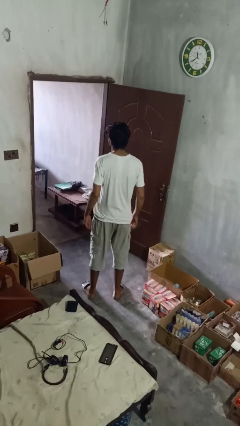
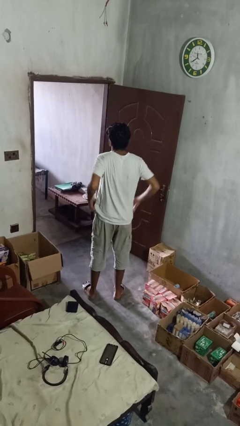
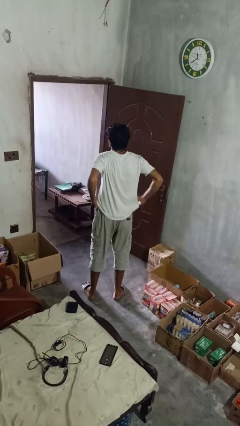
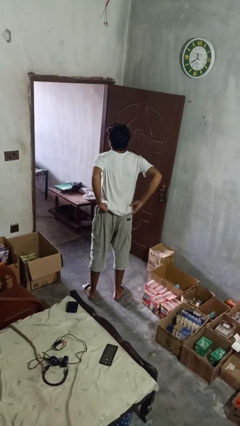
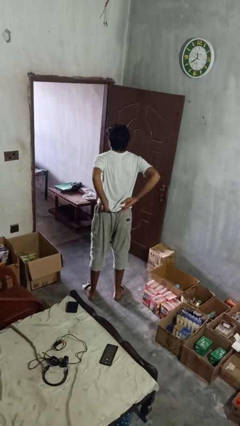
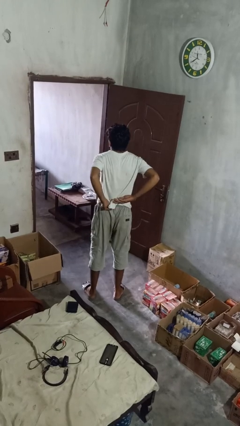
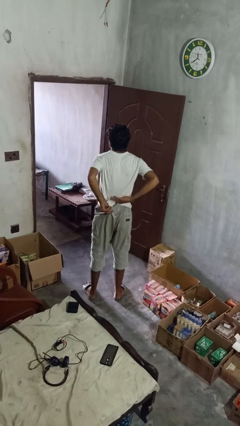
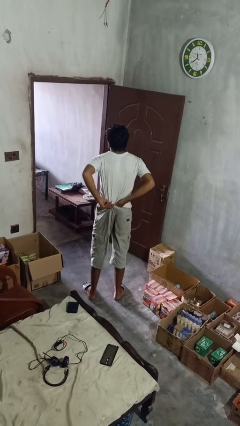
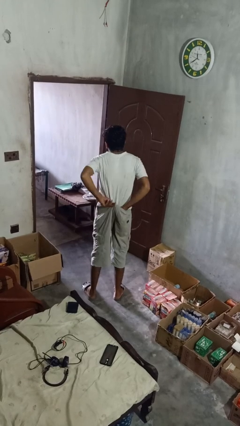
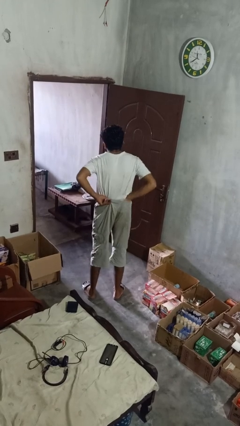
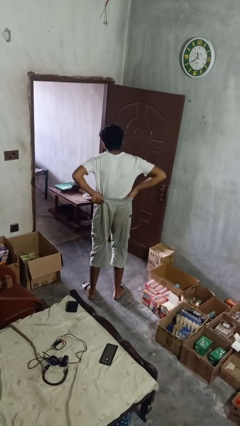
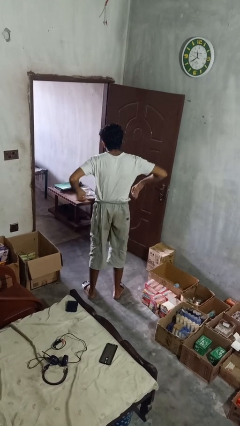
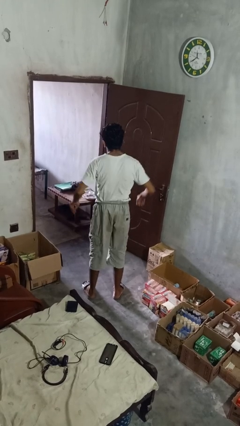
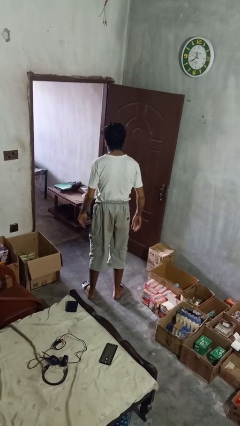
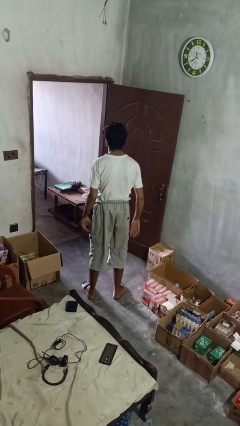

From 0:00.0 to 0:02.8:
person tucks in shirt

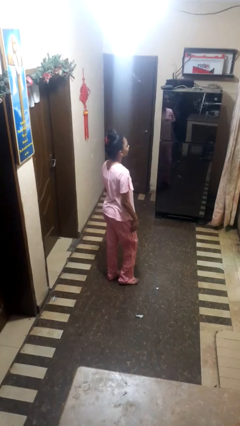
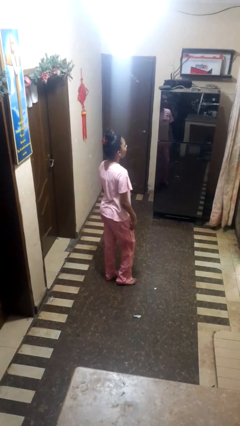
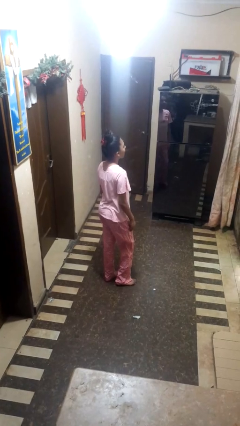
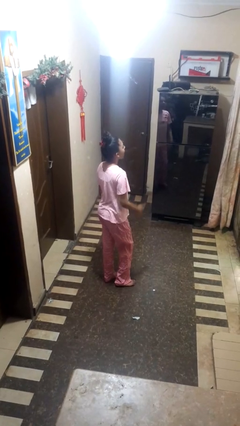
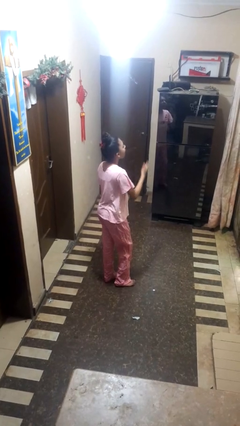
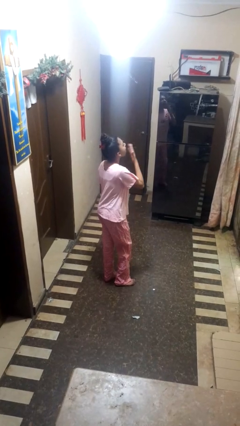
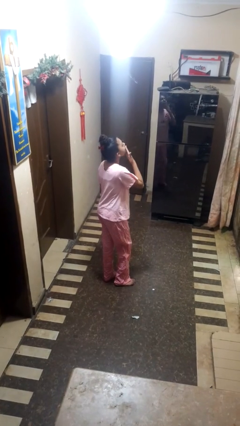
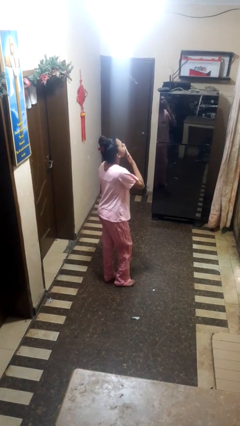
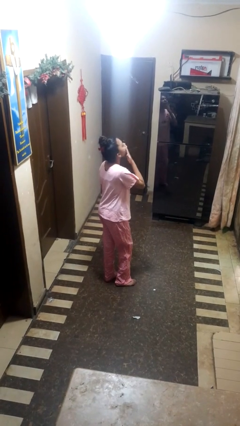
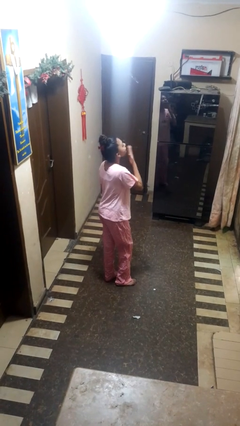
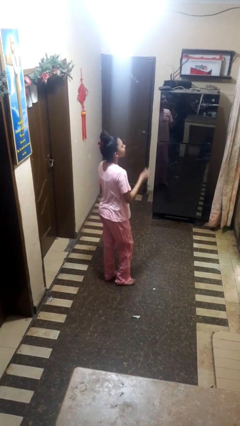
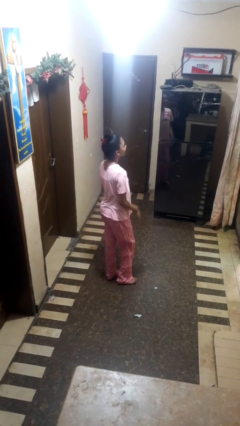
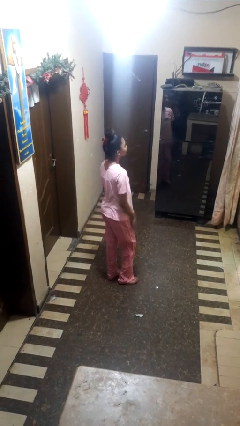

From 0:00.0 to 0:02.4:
person yawns

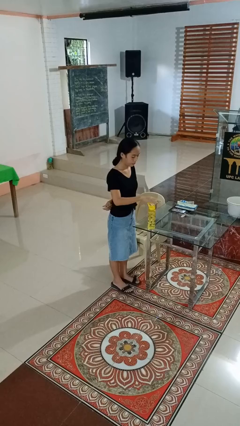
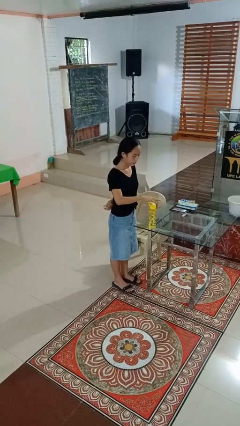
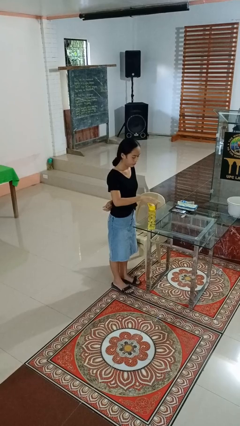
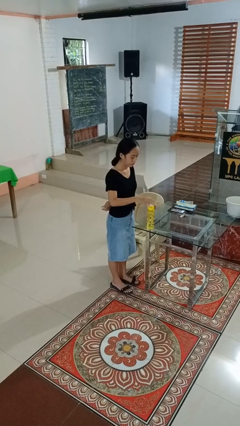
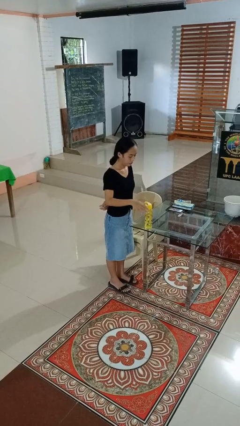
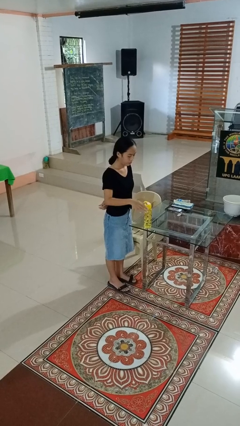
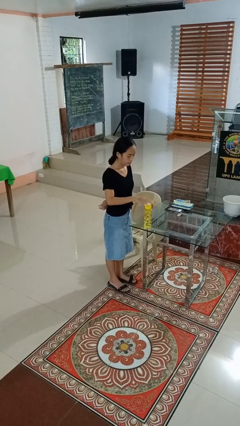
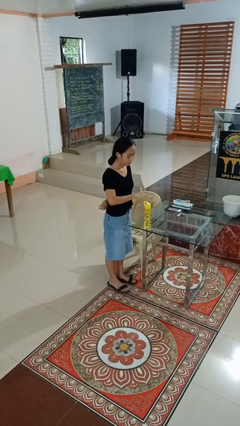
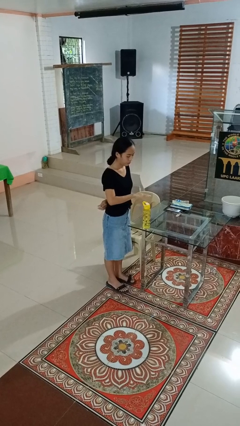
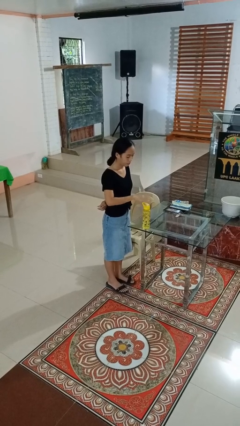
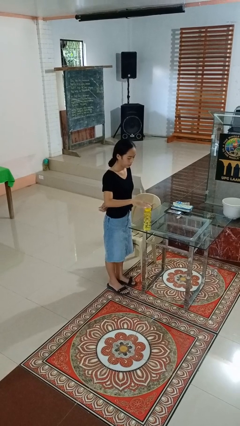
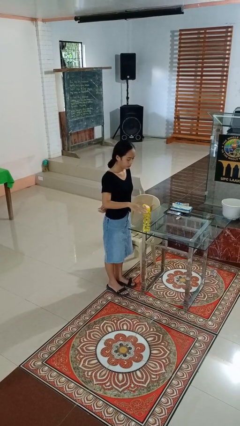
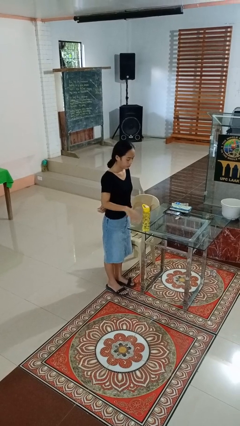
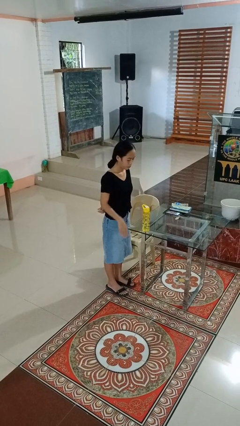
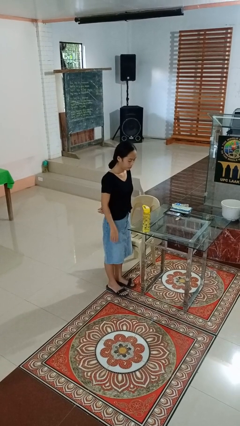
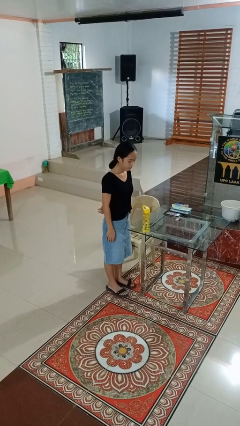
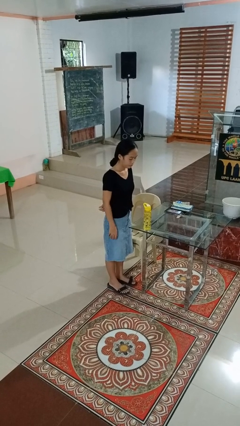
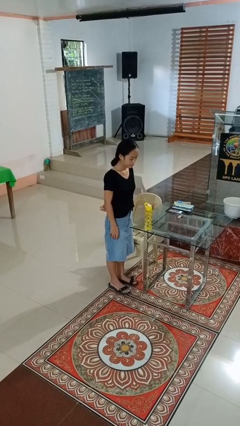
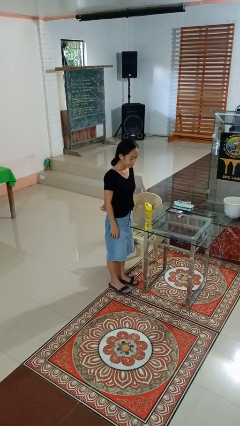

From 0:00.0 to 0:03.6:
person waves hand over object

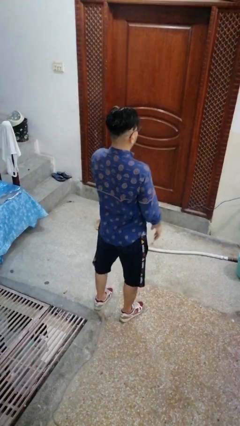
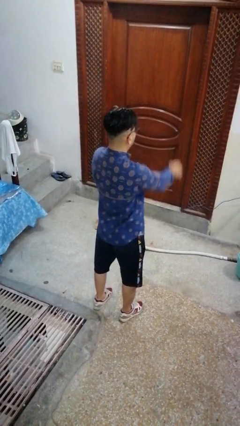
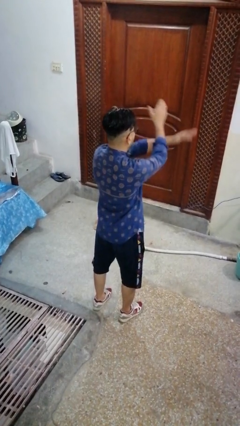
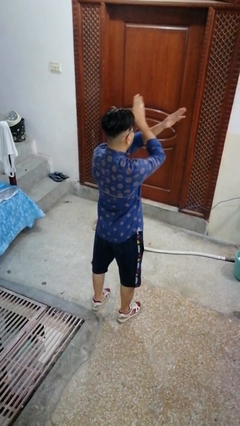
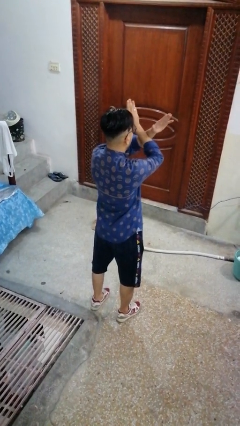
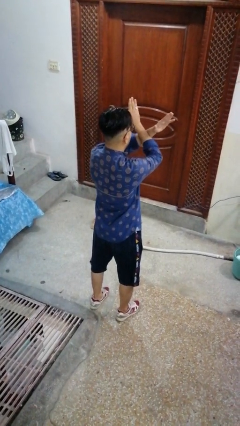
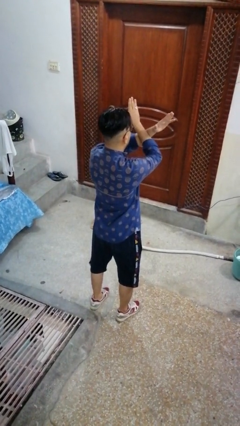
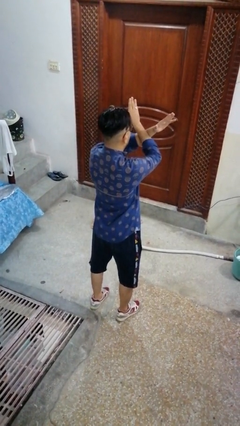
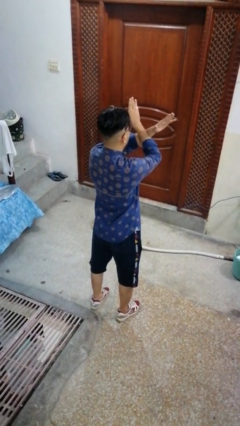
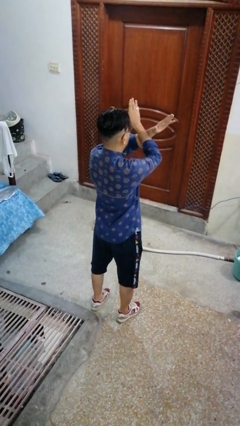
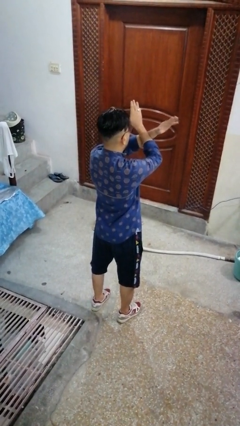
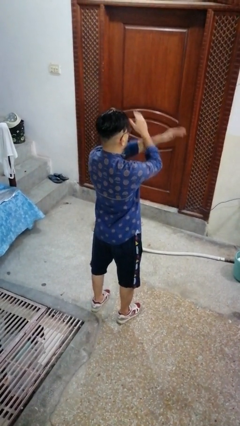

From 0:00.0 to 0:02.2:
person gestures arms x

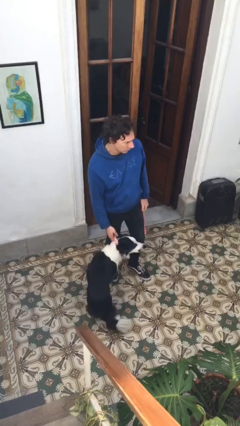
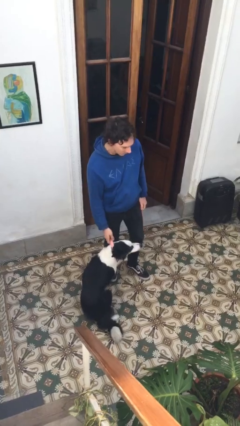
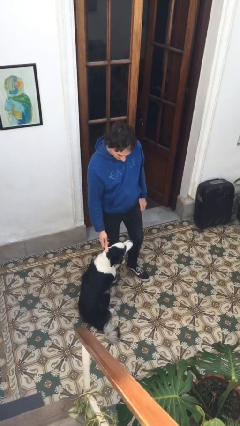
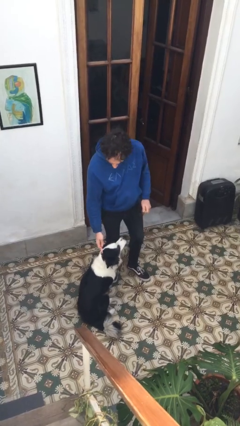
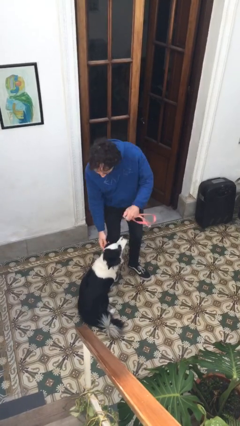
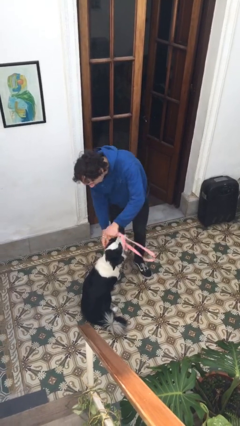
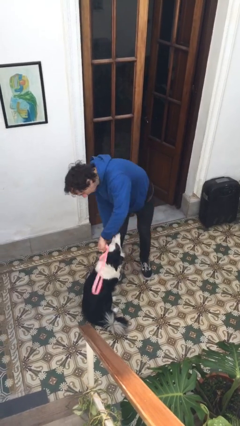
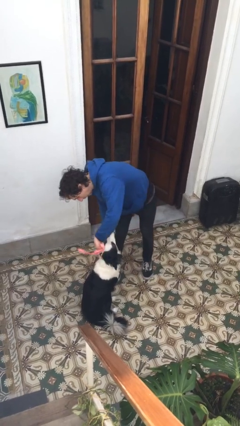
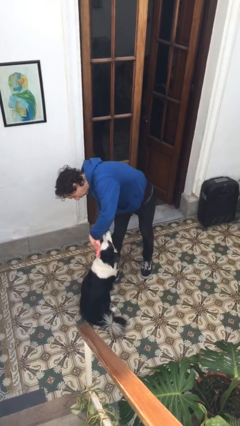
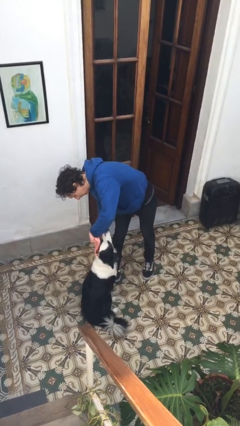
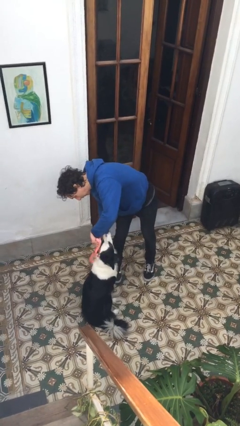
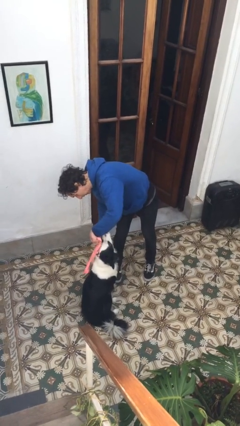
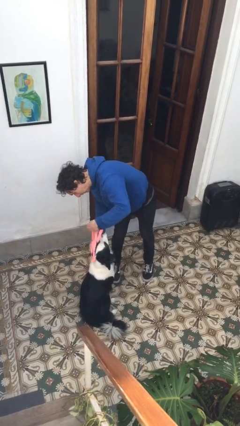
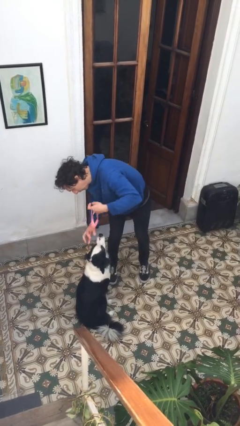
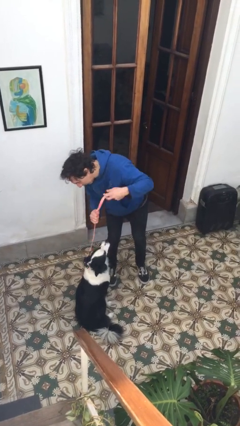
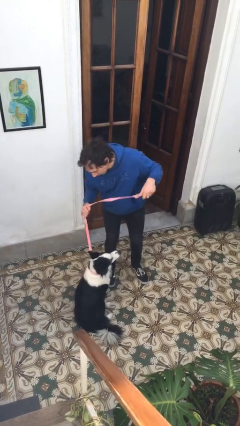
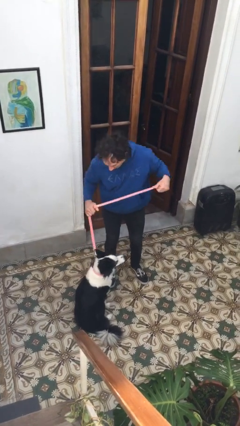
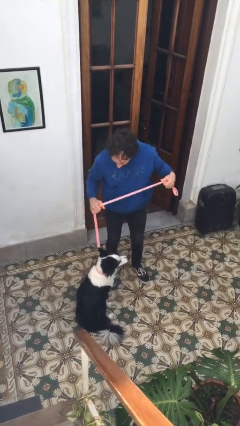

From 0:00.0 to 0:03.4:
person attaches leash to dog

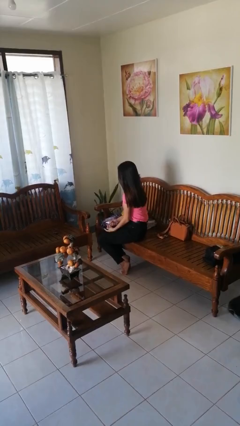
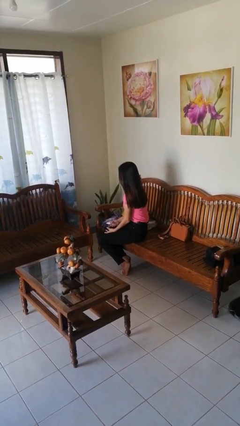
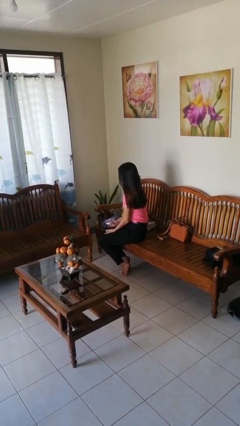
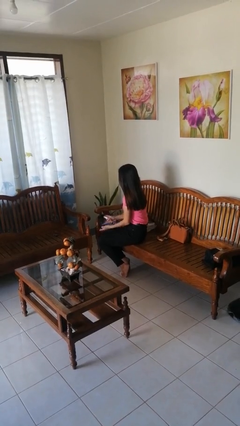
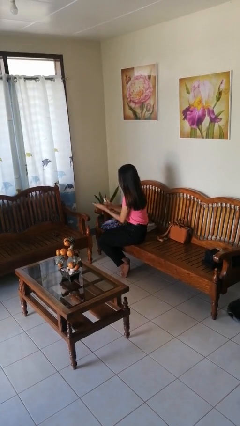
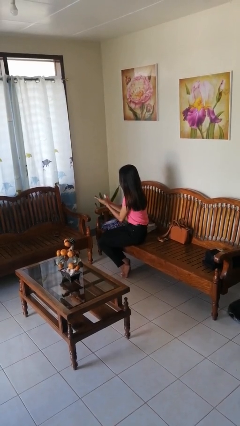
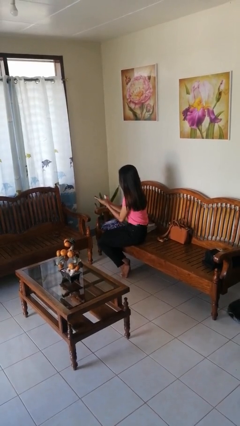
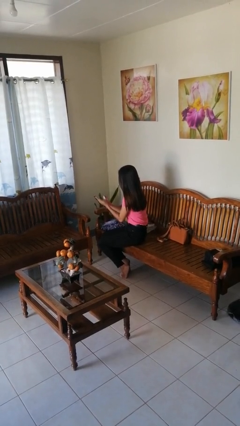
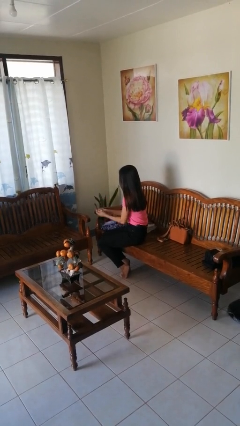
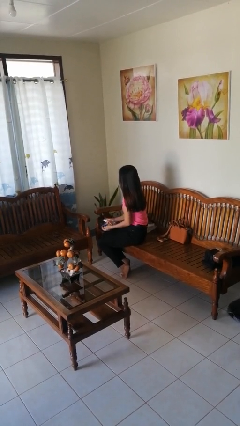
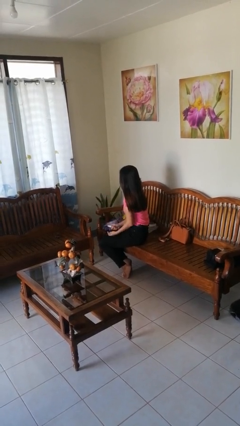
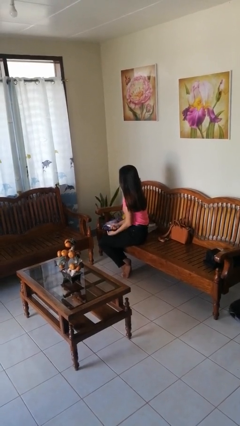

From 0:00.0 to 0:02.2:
person sprays from bottle

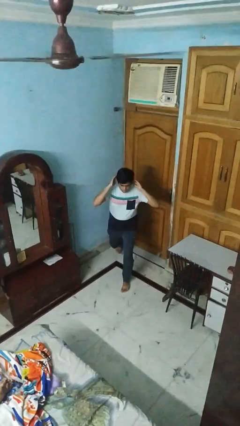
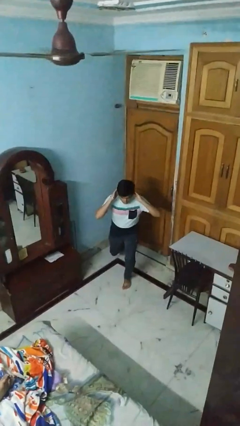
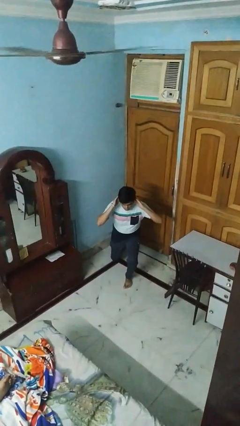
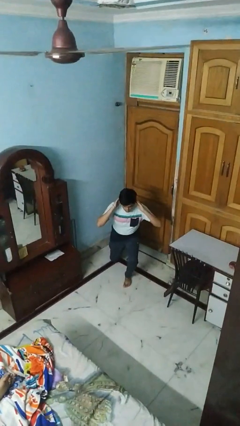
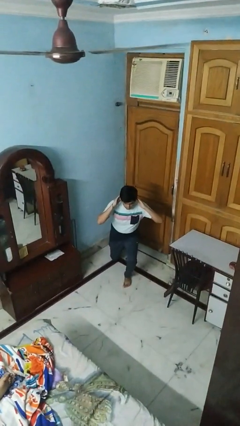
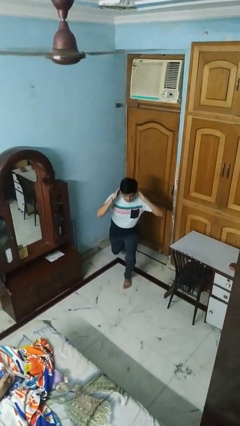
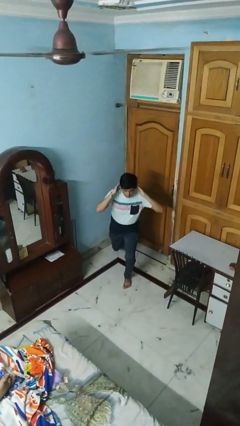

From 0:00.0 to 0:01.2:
person exercises with lunges
